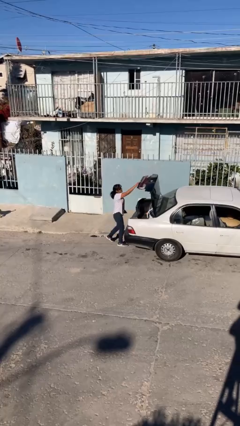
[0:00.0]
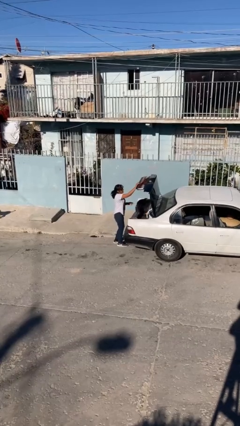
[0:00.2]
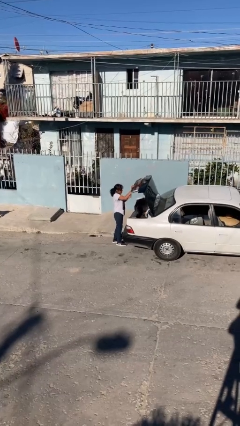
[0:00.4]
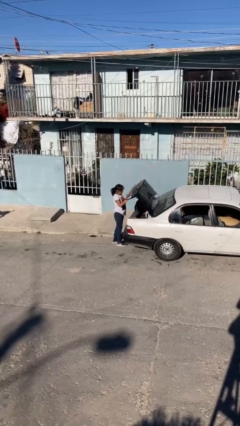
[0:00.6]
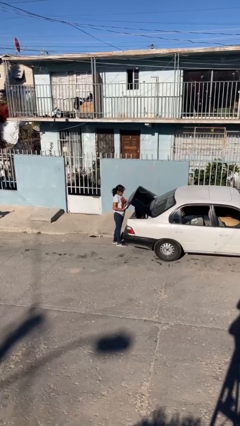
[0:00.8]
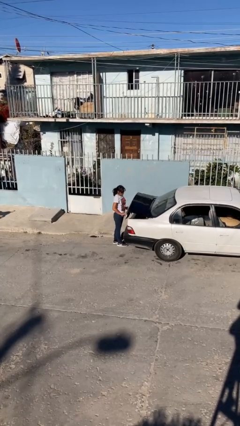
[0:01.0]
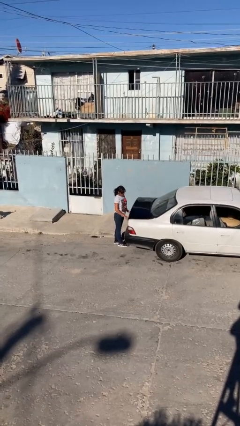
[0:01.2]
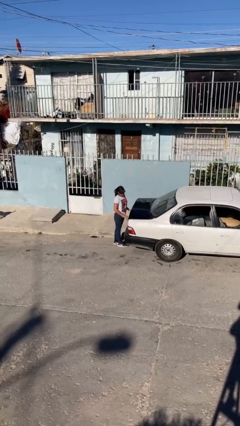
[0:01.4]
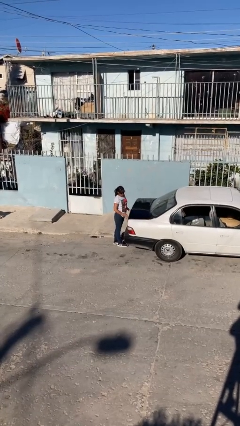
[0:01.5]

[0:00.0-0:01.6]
person closes car trunk

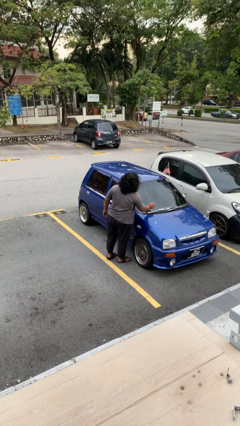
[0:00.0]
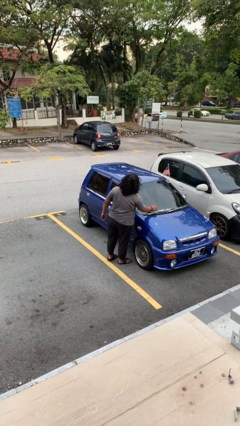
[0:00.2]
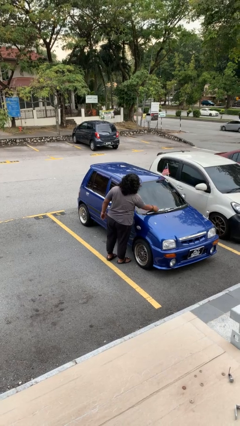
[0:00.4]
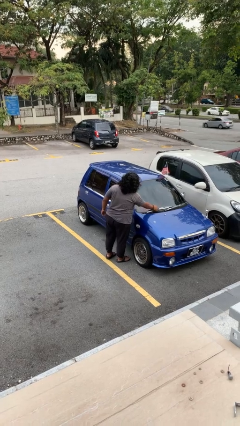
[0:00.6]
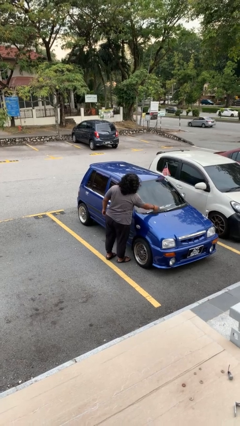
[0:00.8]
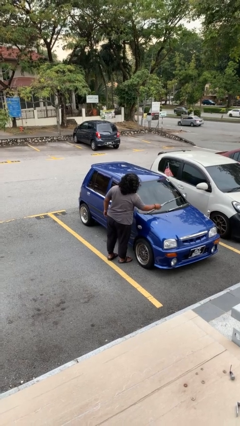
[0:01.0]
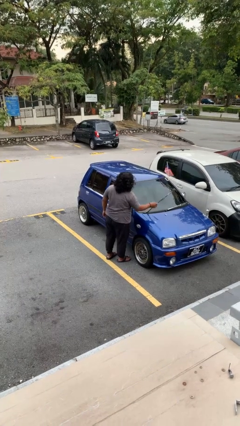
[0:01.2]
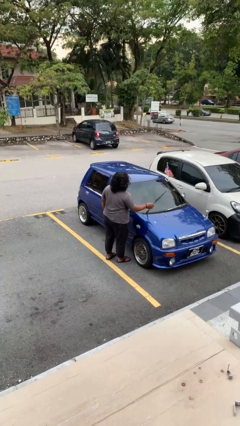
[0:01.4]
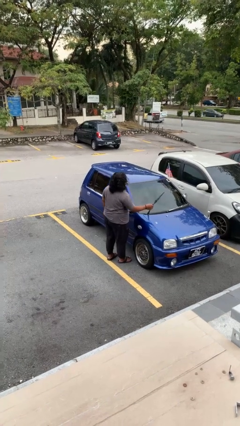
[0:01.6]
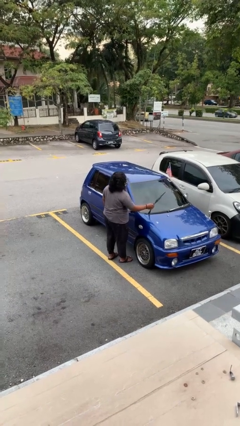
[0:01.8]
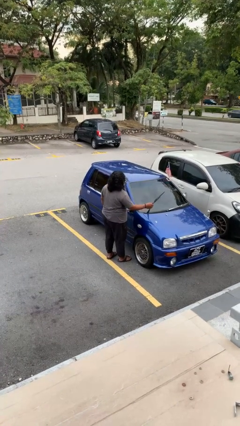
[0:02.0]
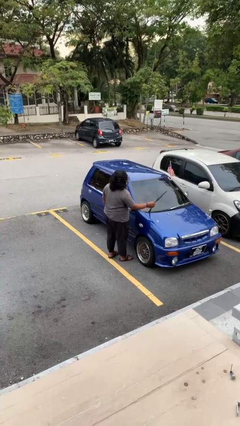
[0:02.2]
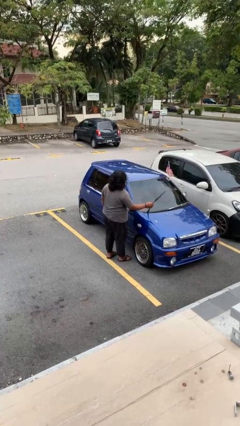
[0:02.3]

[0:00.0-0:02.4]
person flips up car wipers

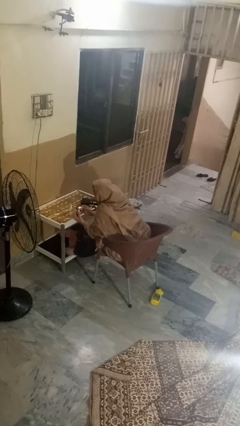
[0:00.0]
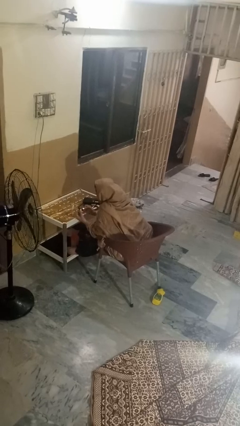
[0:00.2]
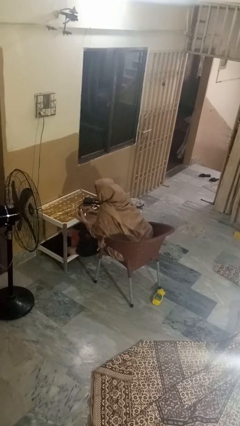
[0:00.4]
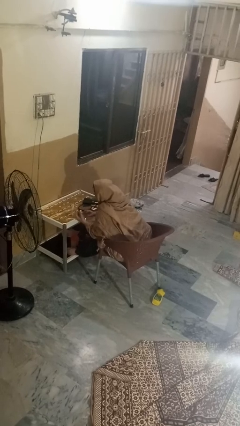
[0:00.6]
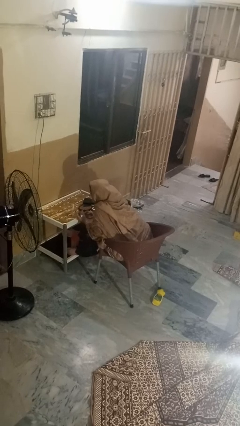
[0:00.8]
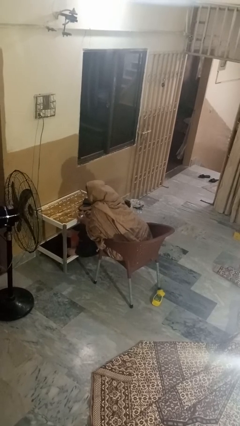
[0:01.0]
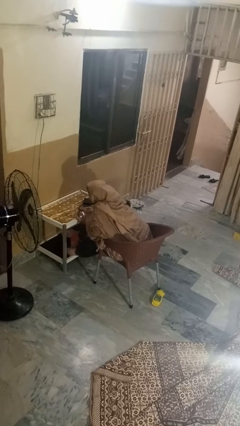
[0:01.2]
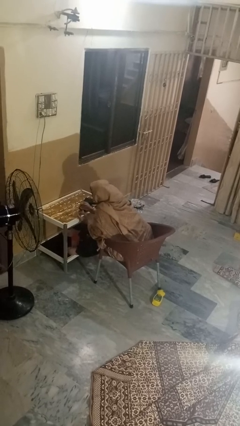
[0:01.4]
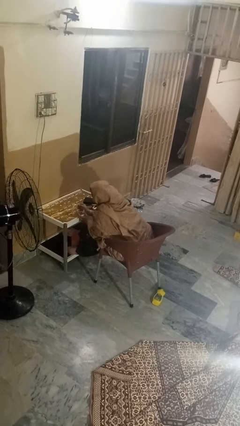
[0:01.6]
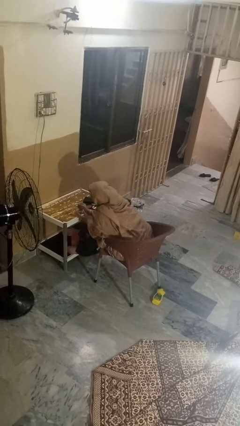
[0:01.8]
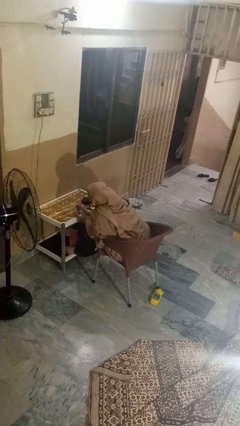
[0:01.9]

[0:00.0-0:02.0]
person extinguishes candle

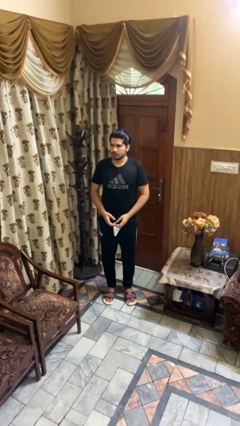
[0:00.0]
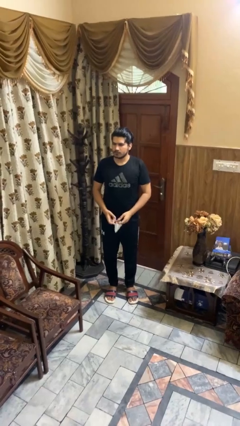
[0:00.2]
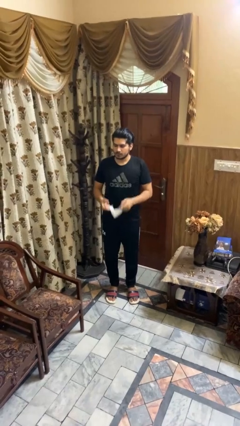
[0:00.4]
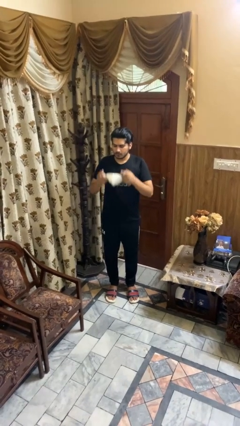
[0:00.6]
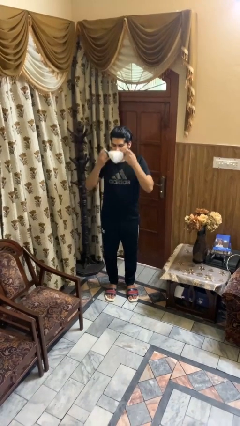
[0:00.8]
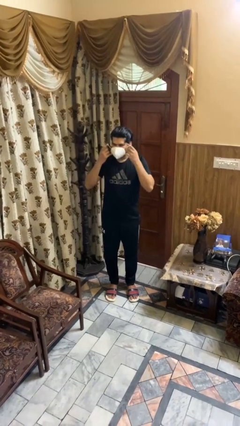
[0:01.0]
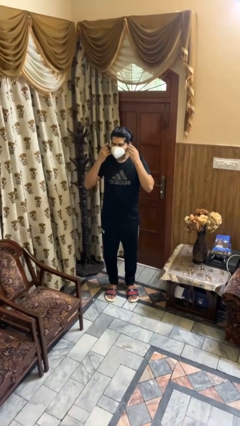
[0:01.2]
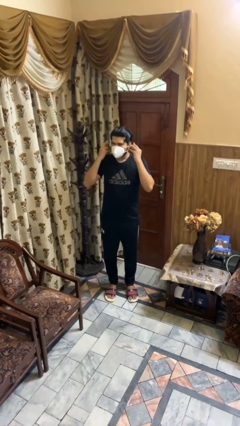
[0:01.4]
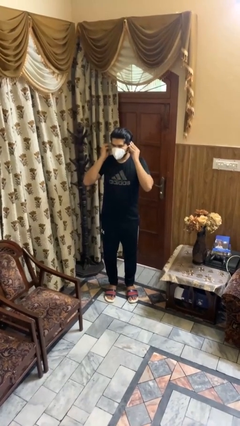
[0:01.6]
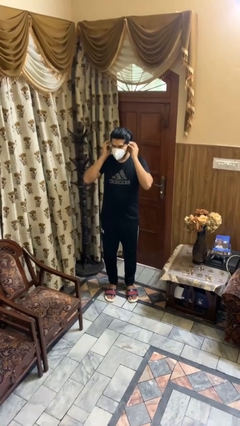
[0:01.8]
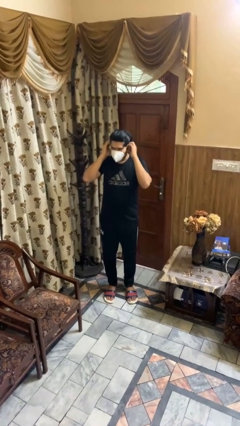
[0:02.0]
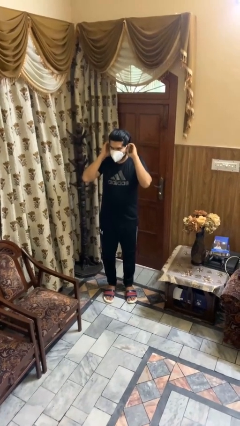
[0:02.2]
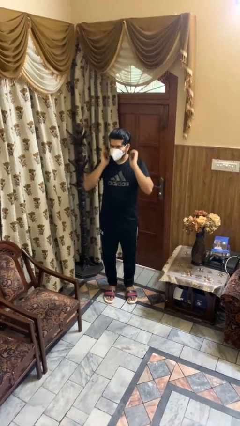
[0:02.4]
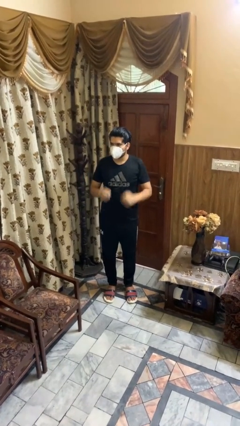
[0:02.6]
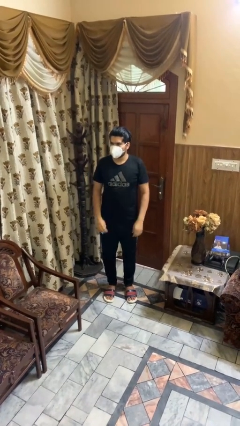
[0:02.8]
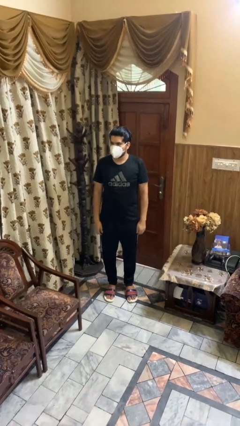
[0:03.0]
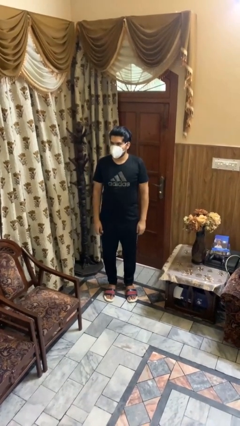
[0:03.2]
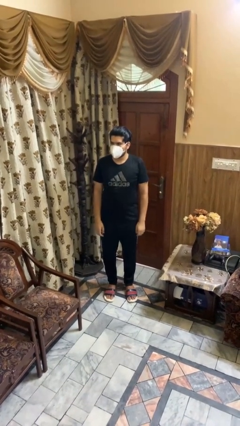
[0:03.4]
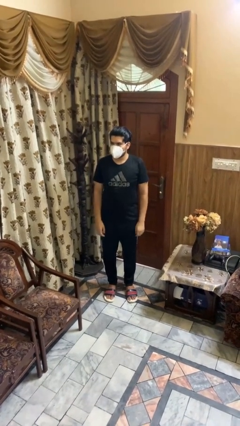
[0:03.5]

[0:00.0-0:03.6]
person puts on facemask

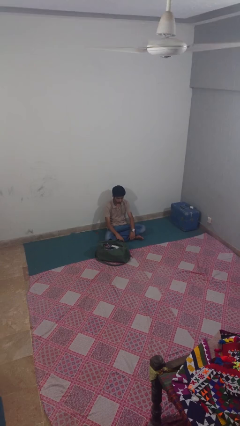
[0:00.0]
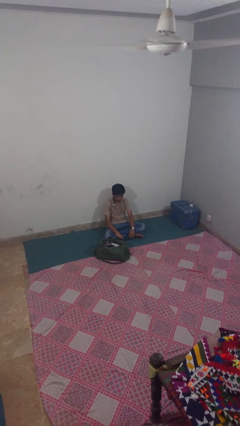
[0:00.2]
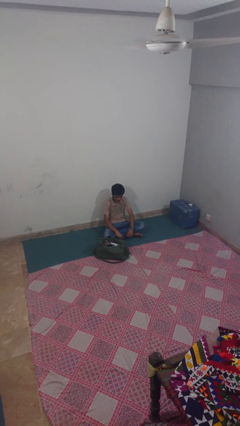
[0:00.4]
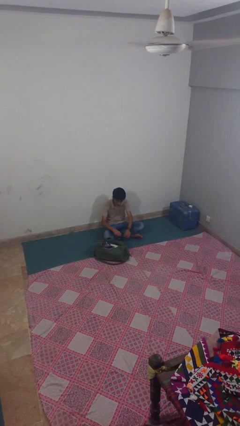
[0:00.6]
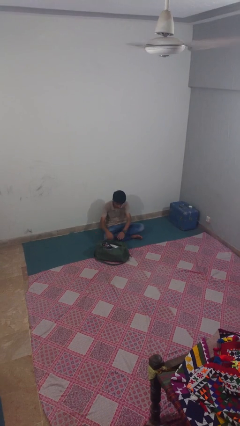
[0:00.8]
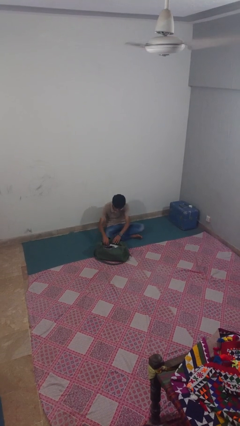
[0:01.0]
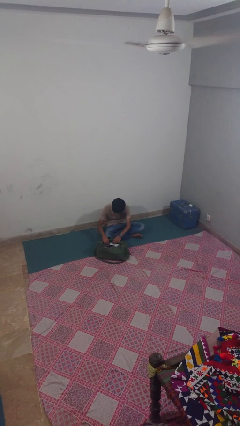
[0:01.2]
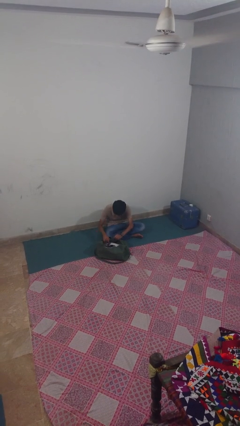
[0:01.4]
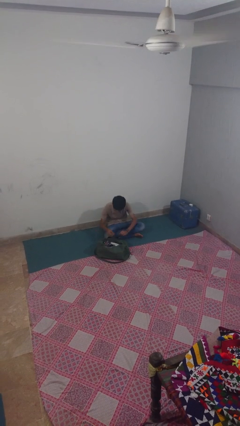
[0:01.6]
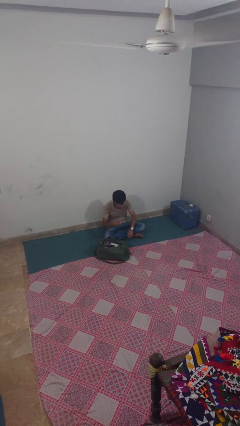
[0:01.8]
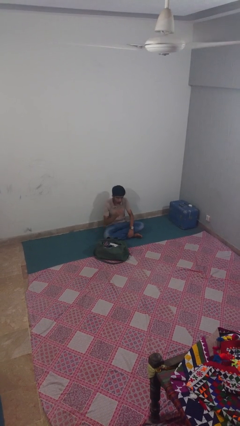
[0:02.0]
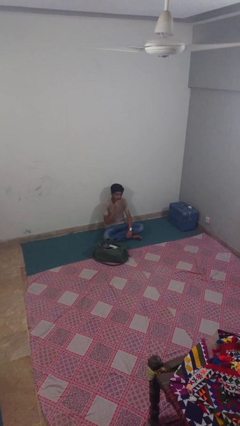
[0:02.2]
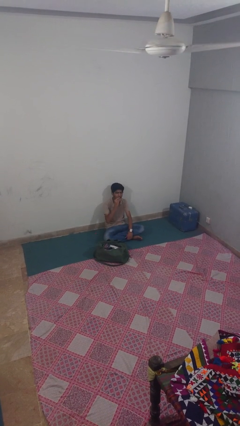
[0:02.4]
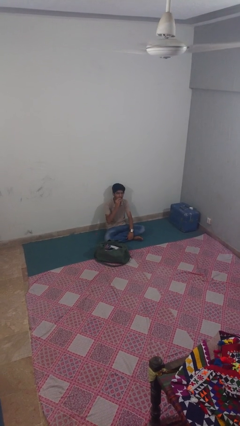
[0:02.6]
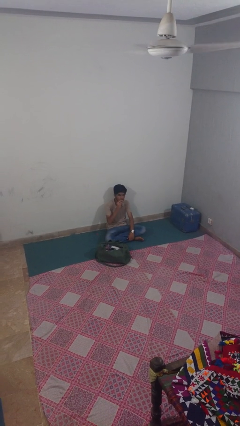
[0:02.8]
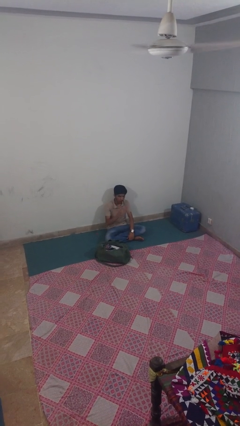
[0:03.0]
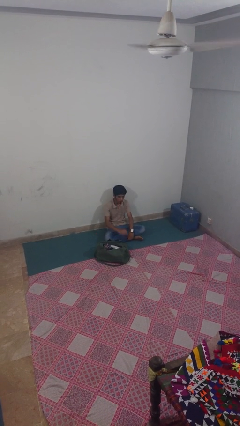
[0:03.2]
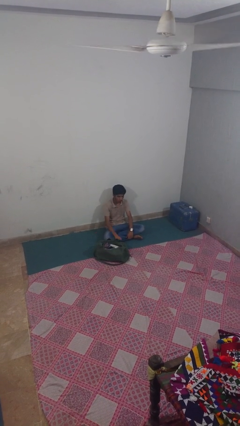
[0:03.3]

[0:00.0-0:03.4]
person eats snack from bag

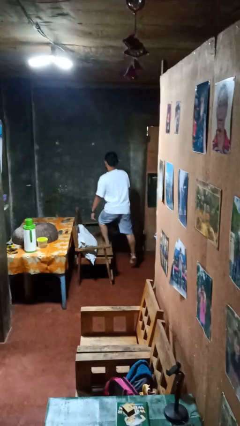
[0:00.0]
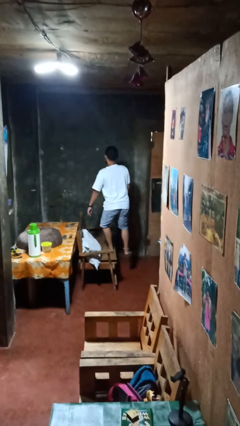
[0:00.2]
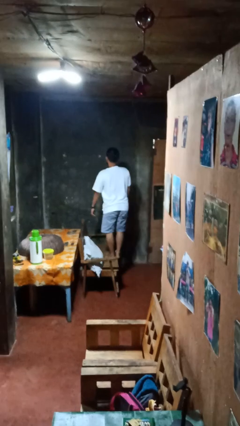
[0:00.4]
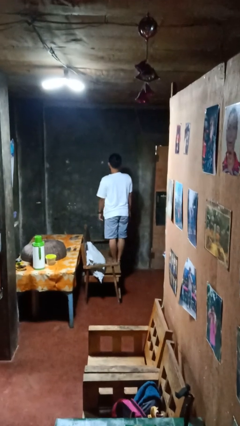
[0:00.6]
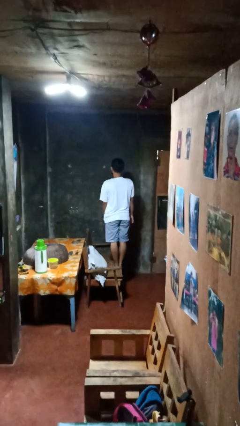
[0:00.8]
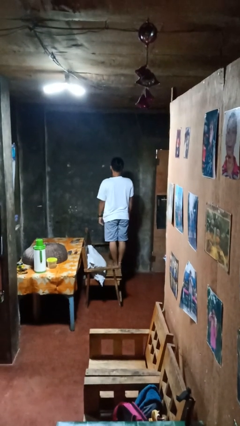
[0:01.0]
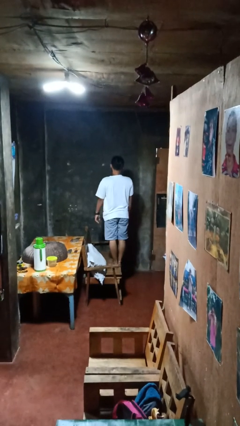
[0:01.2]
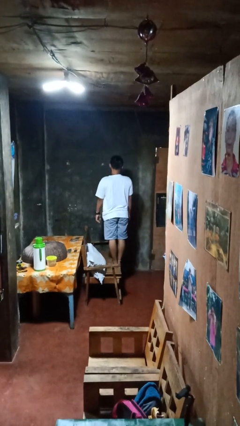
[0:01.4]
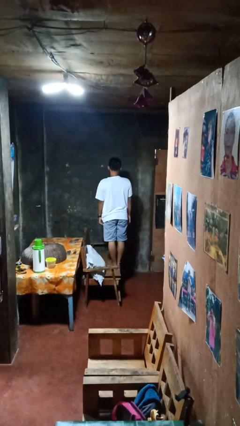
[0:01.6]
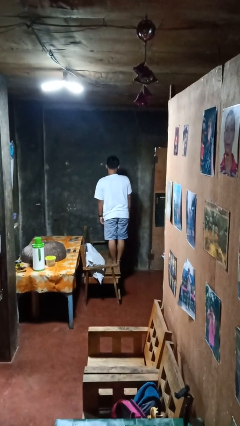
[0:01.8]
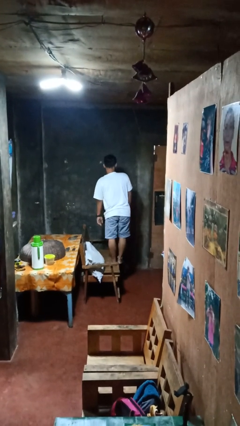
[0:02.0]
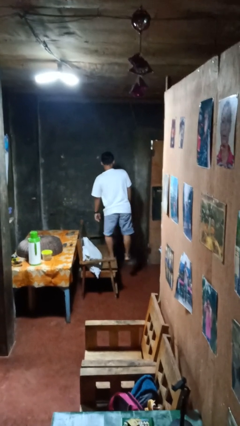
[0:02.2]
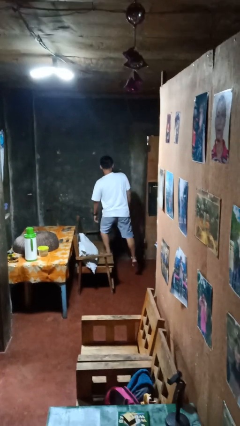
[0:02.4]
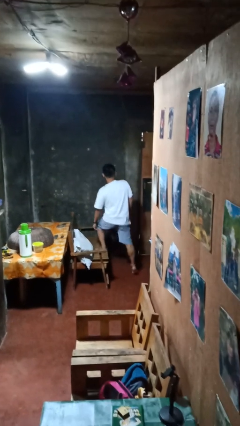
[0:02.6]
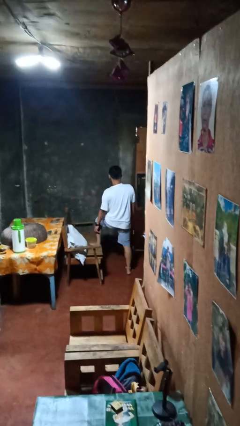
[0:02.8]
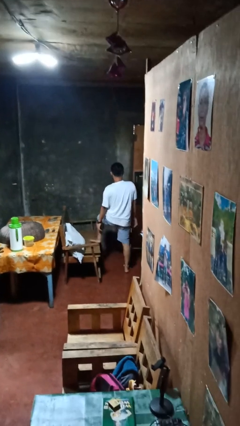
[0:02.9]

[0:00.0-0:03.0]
person climbs on couch

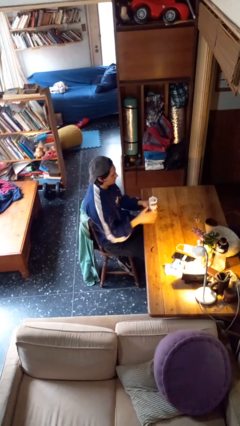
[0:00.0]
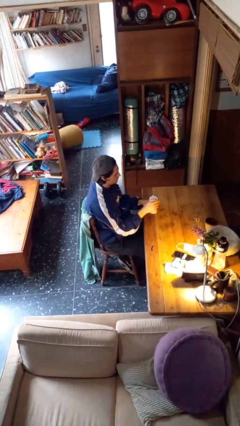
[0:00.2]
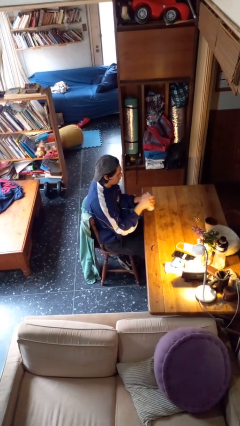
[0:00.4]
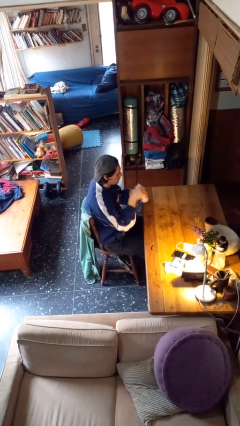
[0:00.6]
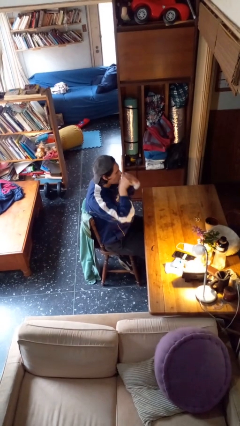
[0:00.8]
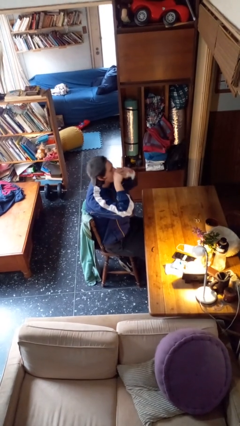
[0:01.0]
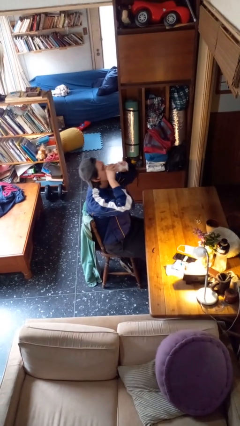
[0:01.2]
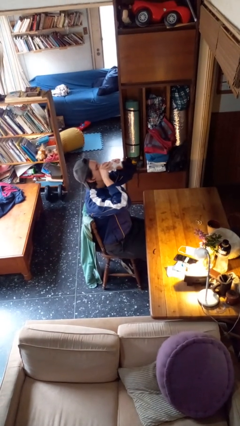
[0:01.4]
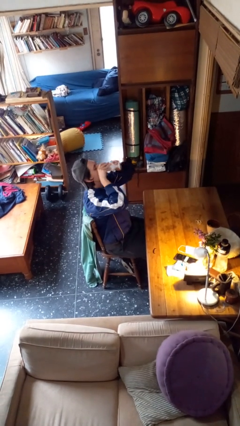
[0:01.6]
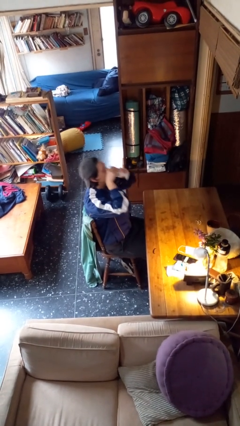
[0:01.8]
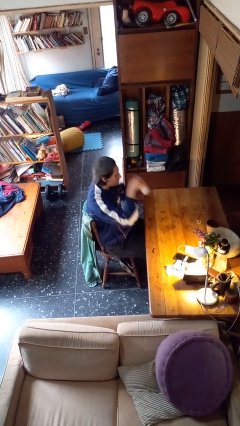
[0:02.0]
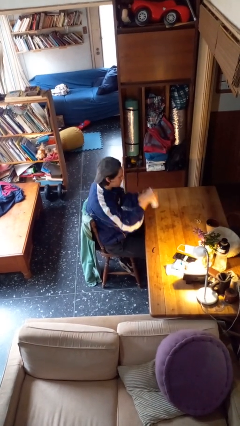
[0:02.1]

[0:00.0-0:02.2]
person drinks from mug
